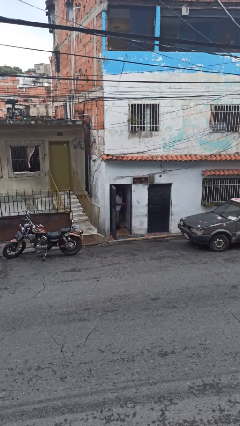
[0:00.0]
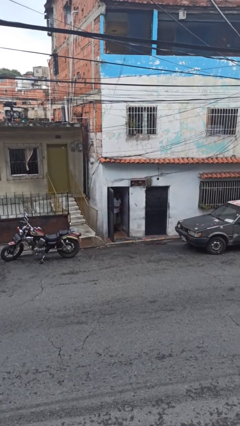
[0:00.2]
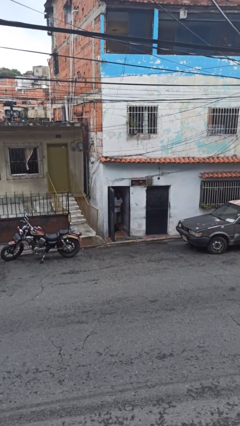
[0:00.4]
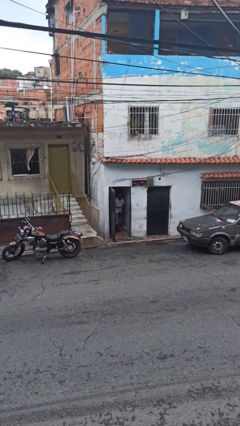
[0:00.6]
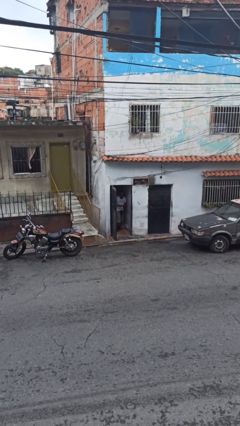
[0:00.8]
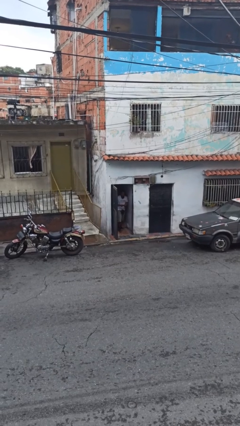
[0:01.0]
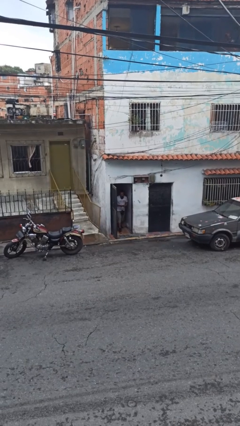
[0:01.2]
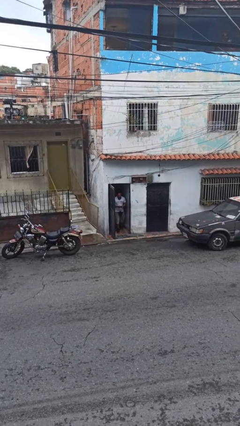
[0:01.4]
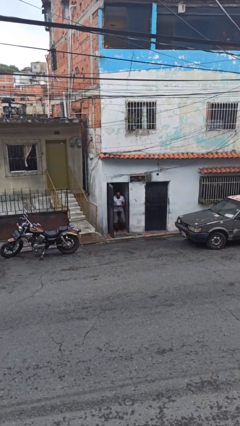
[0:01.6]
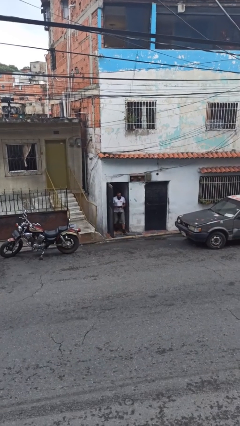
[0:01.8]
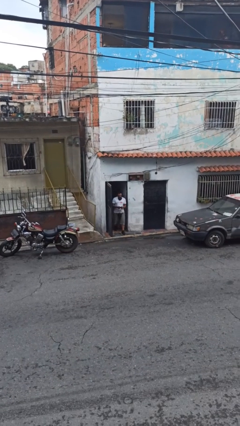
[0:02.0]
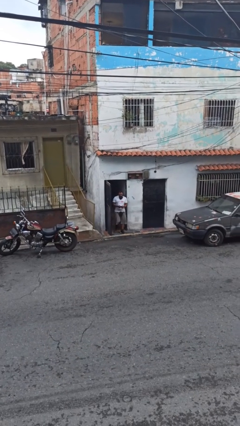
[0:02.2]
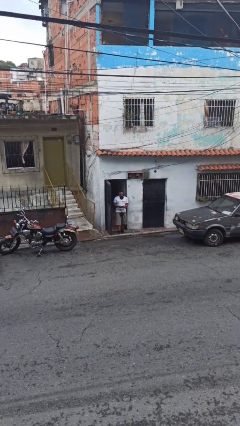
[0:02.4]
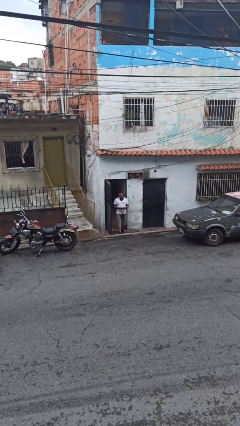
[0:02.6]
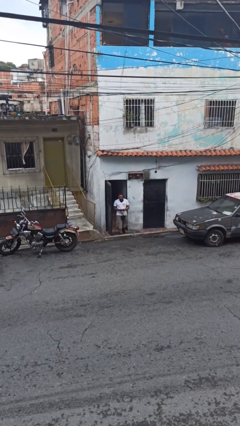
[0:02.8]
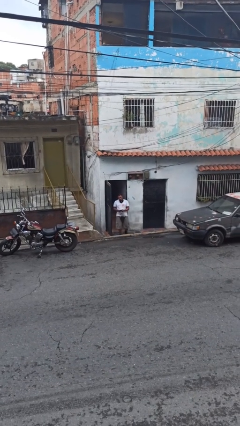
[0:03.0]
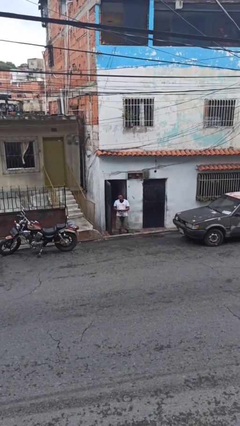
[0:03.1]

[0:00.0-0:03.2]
person enters scene through structure

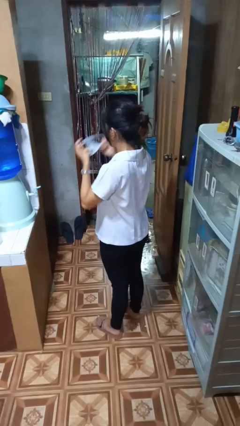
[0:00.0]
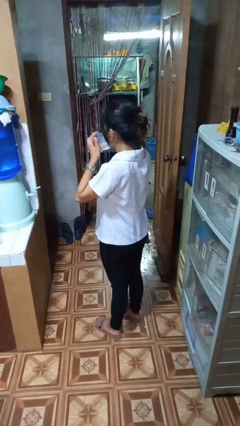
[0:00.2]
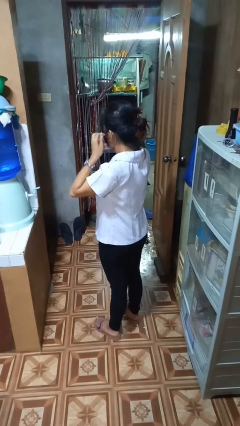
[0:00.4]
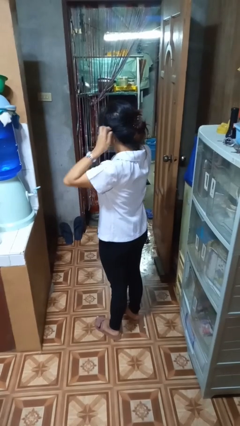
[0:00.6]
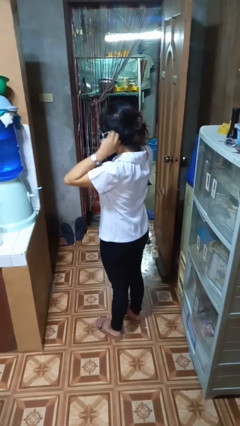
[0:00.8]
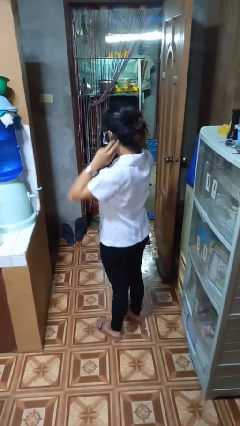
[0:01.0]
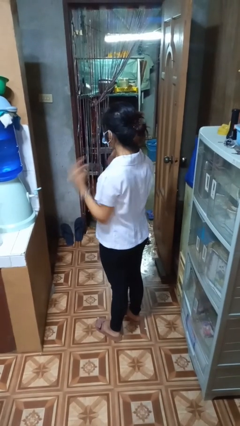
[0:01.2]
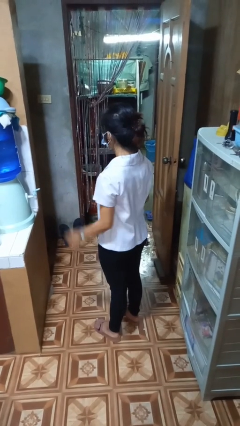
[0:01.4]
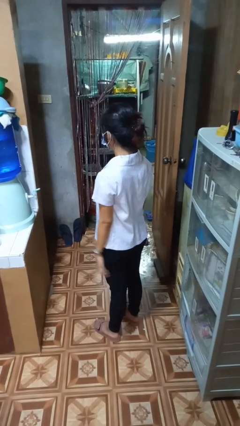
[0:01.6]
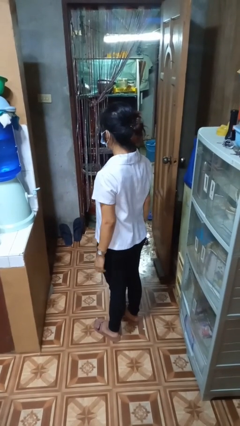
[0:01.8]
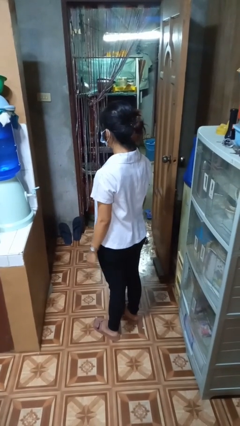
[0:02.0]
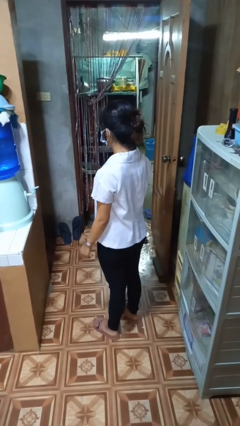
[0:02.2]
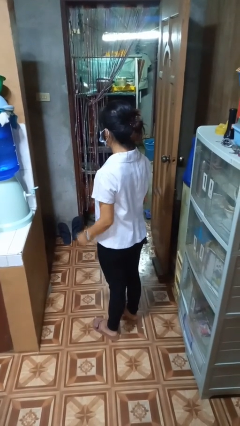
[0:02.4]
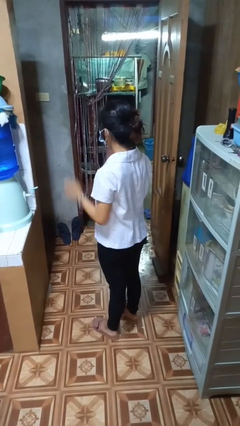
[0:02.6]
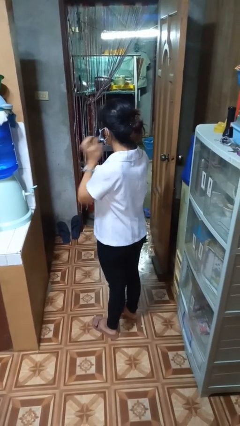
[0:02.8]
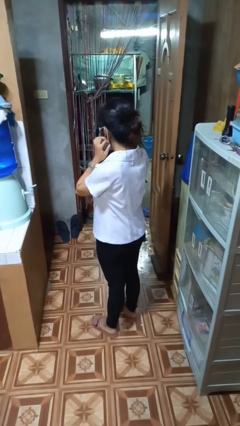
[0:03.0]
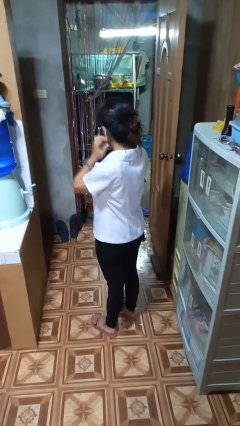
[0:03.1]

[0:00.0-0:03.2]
person puts on facemask

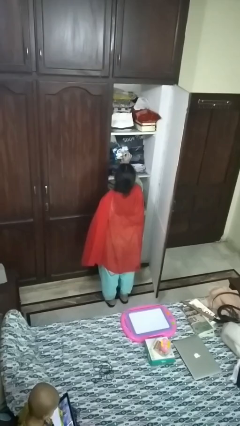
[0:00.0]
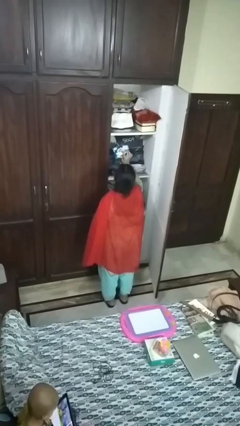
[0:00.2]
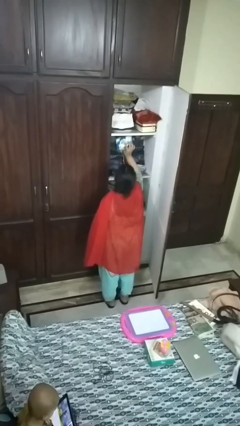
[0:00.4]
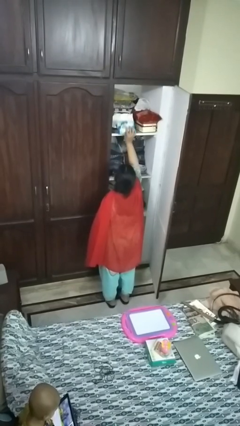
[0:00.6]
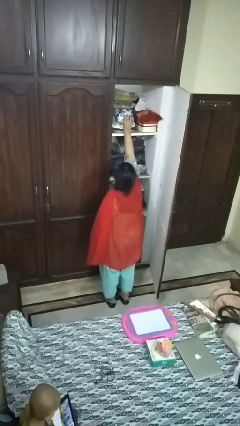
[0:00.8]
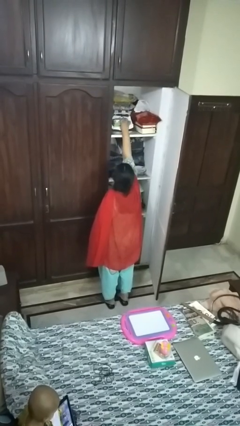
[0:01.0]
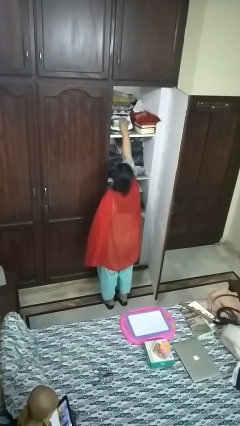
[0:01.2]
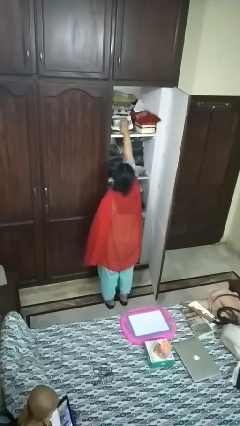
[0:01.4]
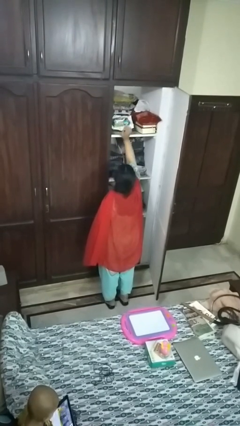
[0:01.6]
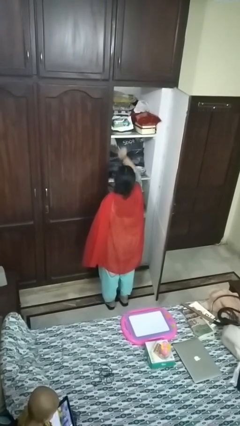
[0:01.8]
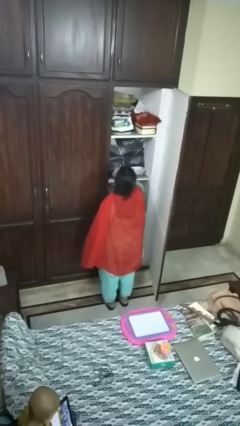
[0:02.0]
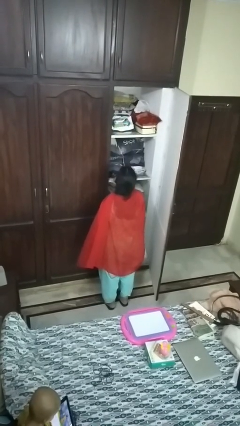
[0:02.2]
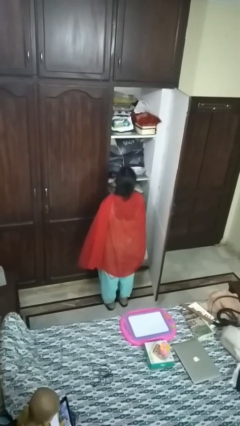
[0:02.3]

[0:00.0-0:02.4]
person puts down object on countertop

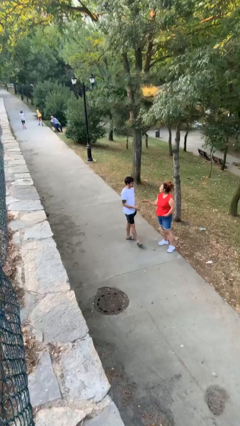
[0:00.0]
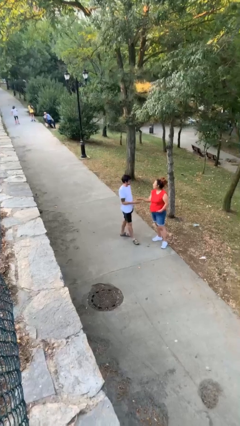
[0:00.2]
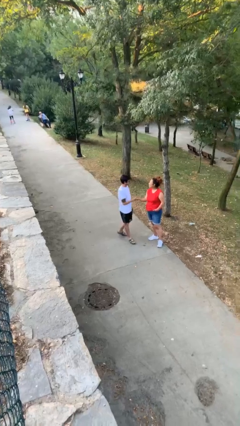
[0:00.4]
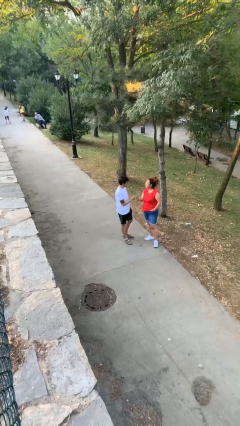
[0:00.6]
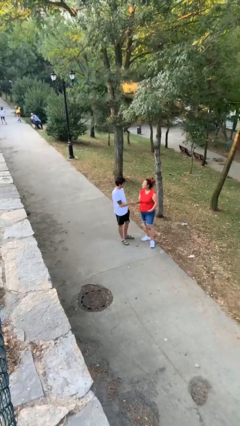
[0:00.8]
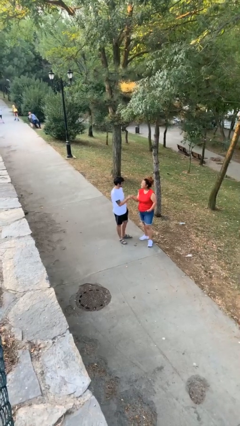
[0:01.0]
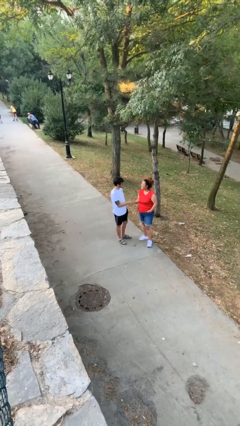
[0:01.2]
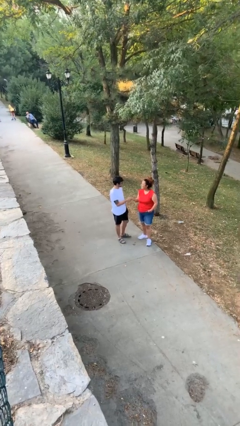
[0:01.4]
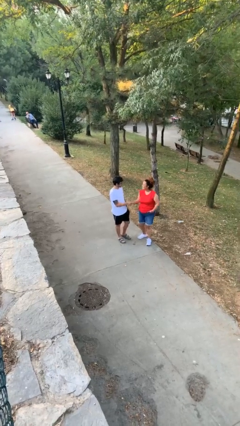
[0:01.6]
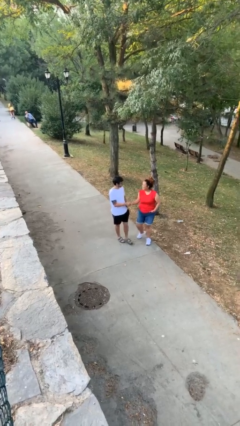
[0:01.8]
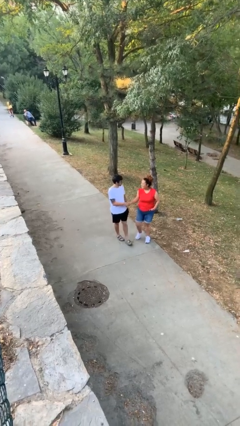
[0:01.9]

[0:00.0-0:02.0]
person shakes hand

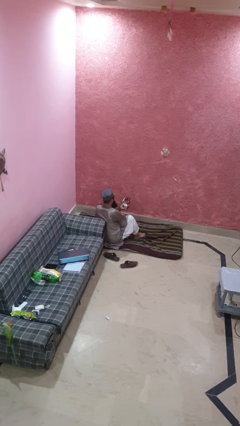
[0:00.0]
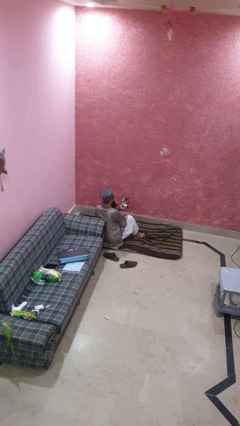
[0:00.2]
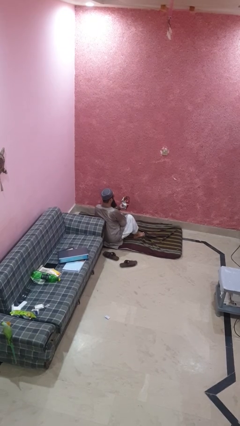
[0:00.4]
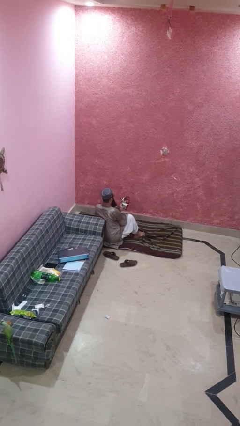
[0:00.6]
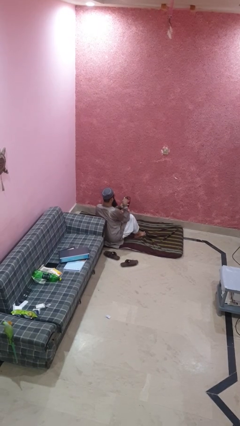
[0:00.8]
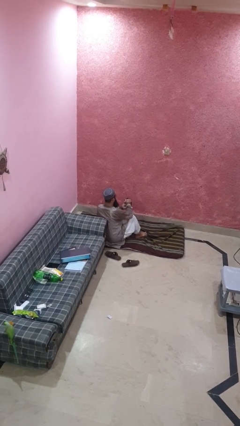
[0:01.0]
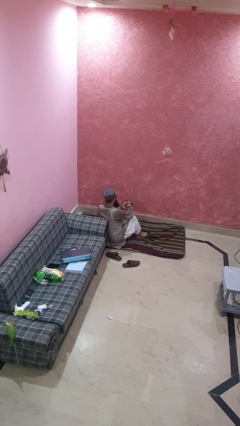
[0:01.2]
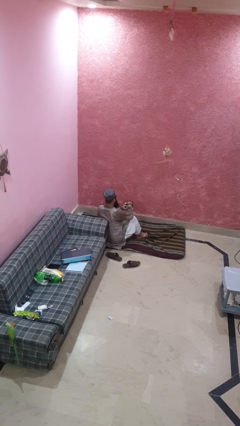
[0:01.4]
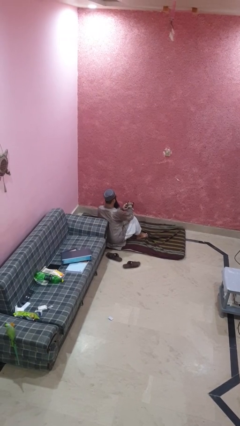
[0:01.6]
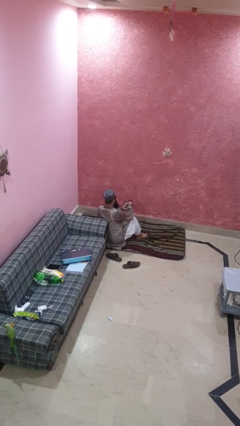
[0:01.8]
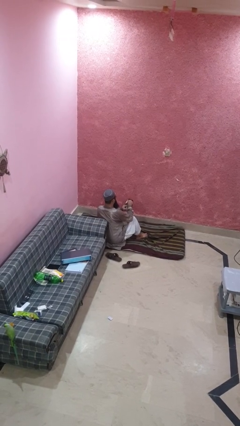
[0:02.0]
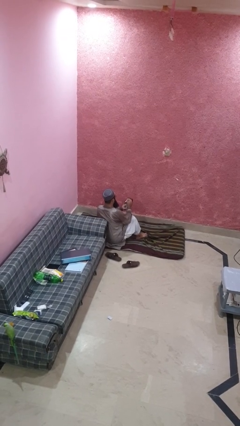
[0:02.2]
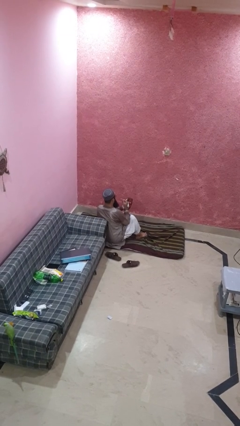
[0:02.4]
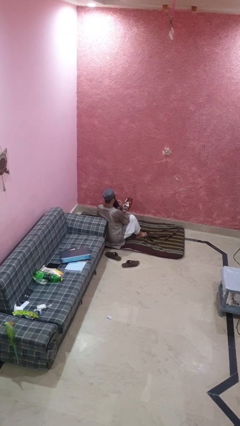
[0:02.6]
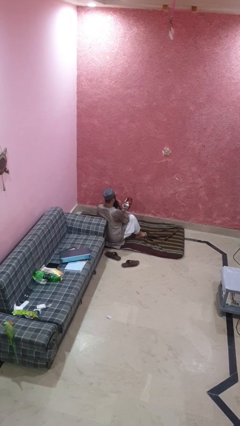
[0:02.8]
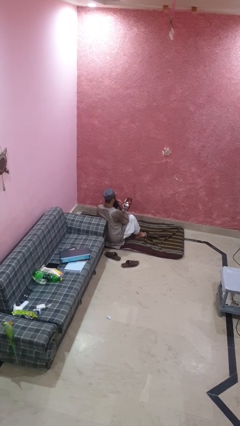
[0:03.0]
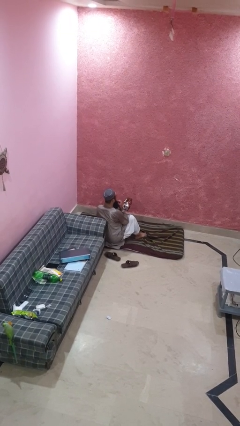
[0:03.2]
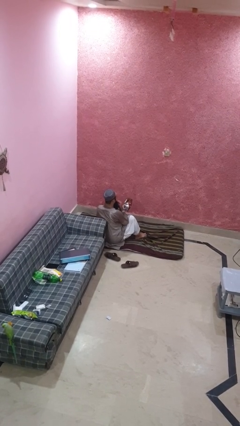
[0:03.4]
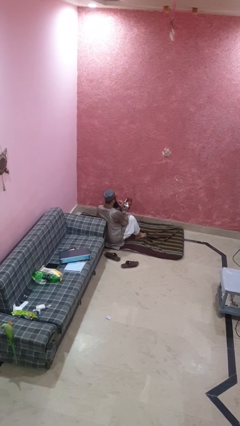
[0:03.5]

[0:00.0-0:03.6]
person eats snack from bag

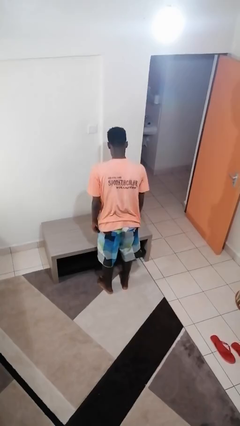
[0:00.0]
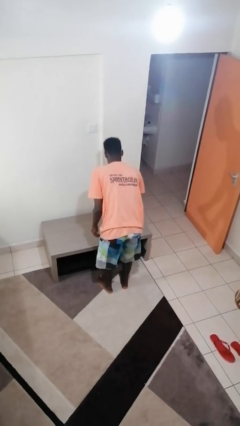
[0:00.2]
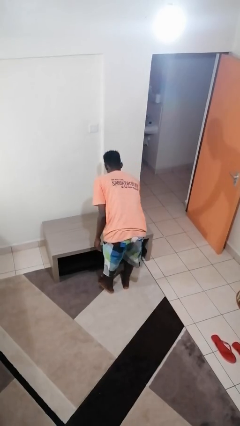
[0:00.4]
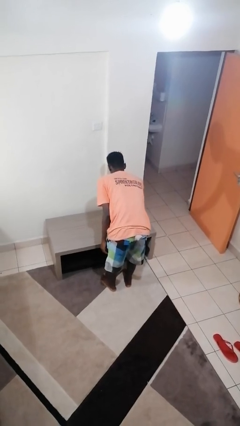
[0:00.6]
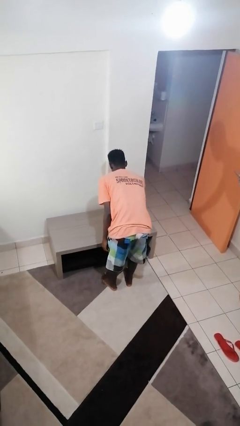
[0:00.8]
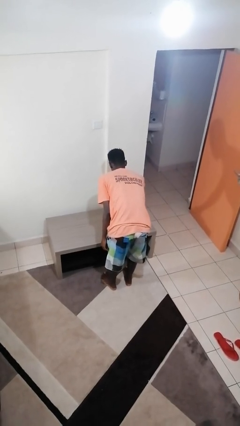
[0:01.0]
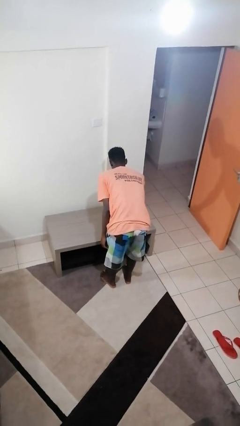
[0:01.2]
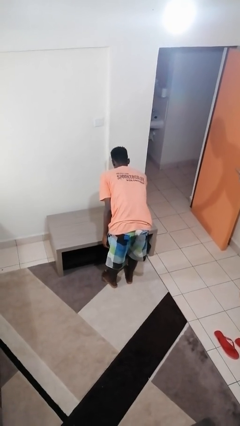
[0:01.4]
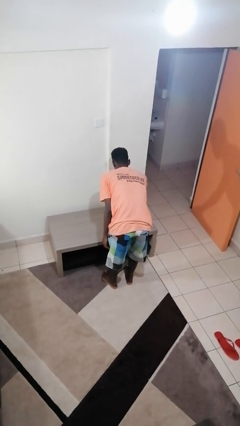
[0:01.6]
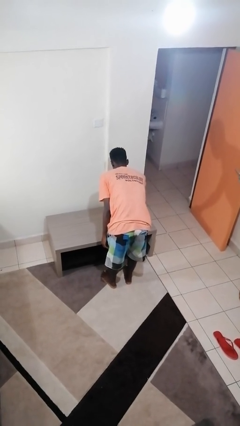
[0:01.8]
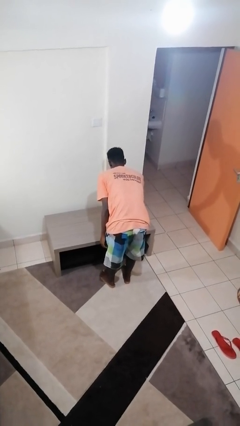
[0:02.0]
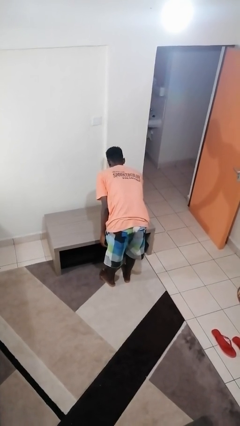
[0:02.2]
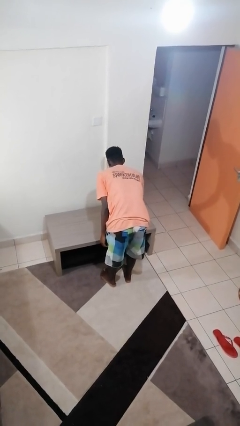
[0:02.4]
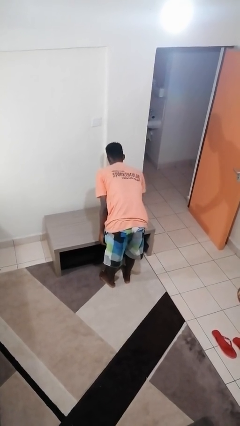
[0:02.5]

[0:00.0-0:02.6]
person sprays from bottle
